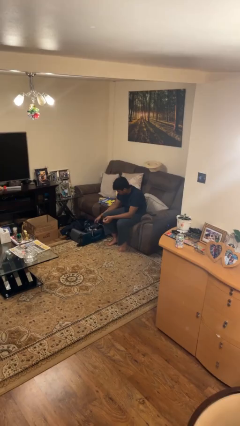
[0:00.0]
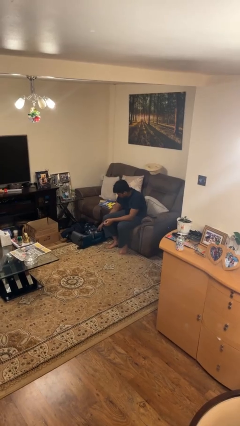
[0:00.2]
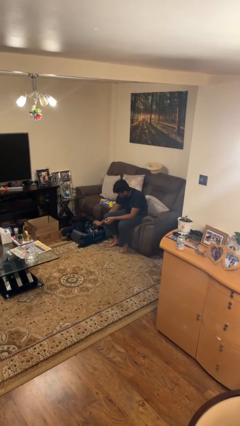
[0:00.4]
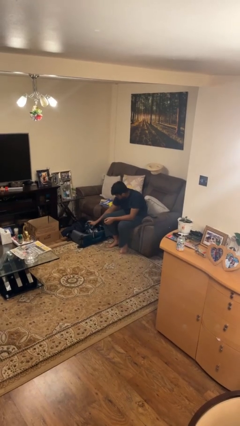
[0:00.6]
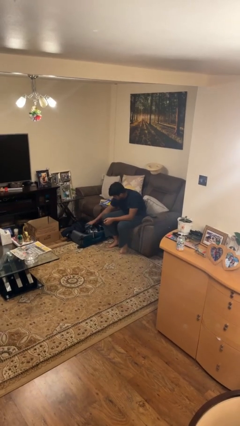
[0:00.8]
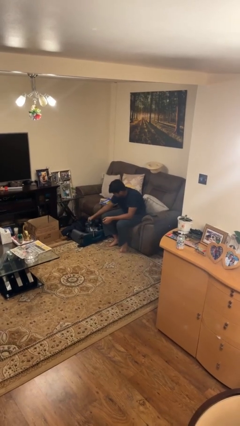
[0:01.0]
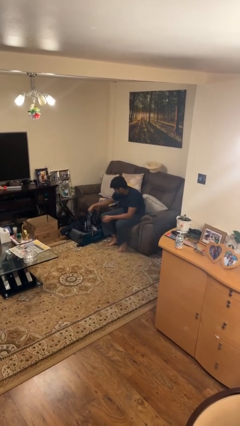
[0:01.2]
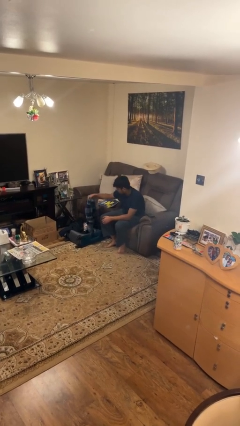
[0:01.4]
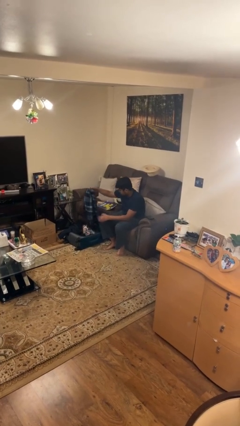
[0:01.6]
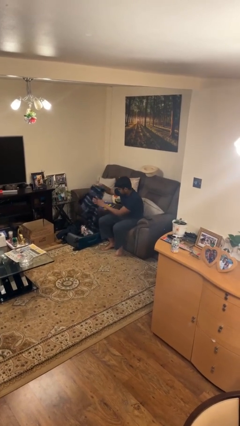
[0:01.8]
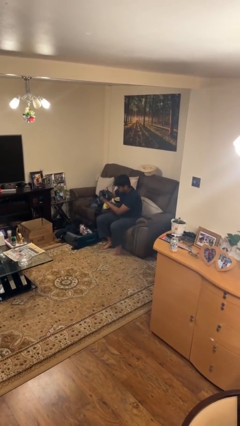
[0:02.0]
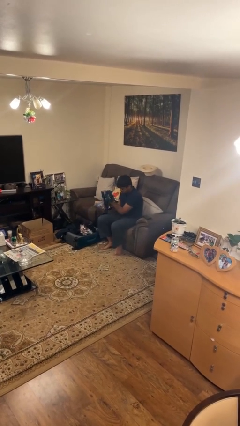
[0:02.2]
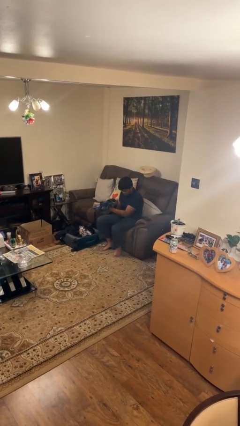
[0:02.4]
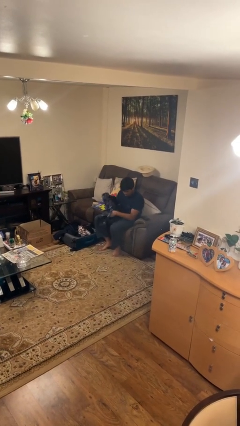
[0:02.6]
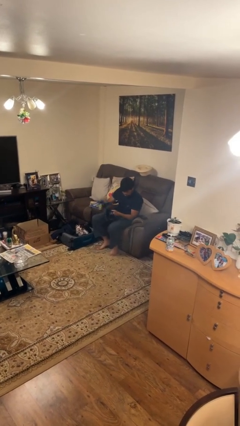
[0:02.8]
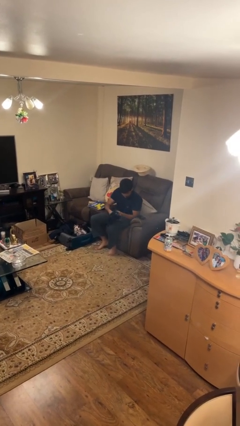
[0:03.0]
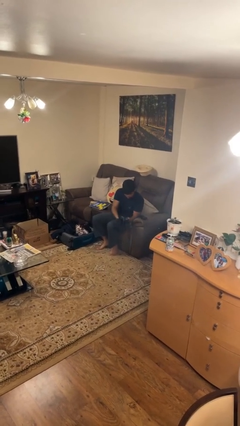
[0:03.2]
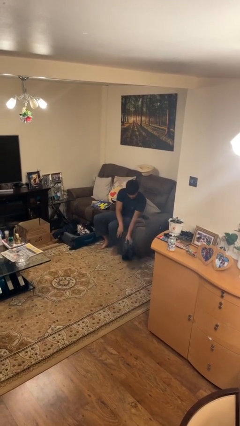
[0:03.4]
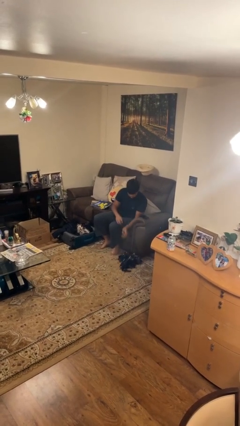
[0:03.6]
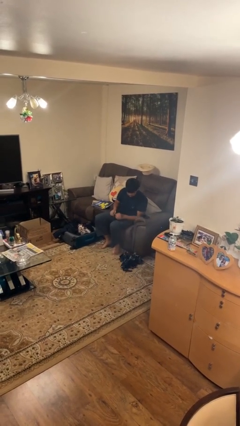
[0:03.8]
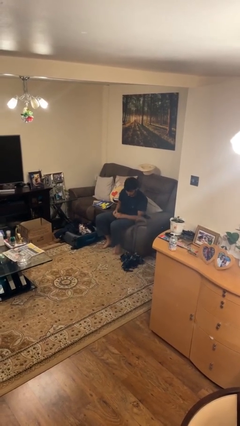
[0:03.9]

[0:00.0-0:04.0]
person unloads clothes from suitcase

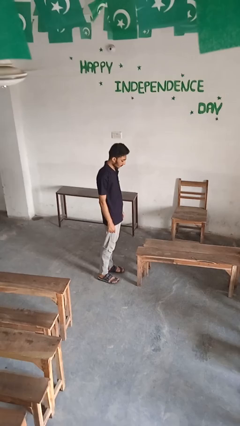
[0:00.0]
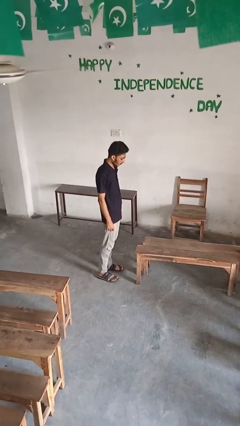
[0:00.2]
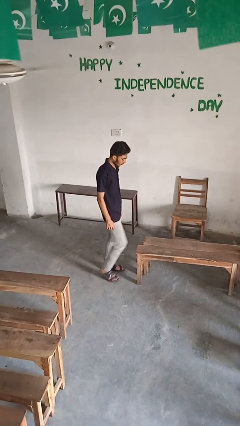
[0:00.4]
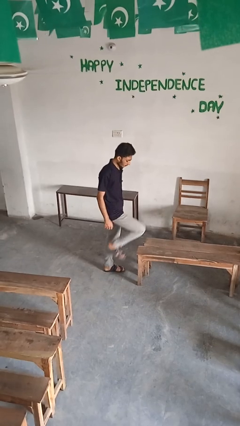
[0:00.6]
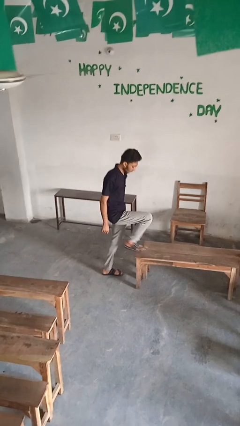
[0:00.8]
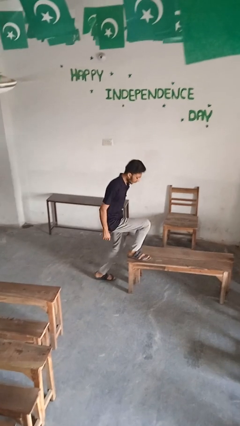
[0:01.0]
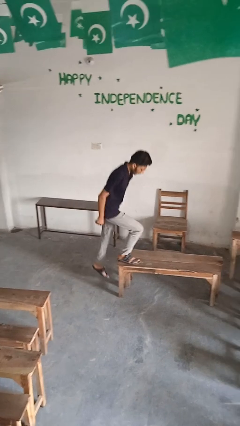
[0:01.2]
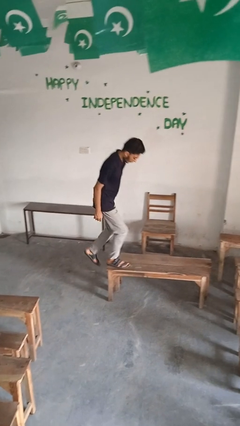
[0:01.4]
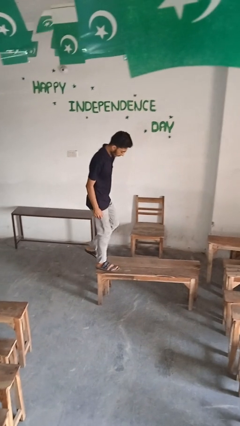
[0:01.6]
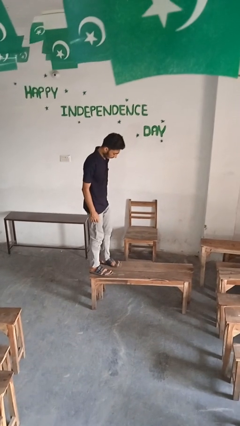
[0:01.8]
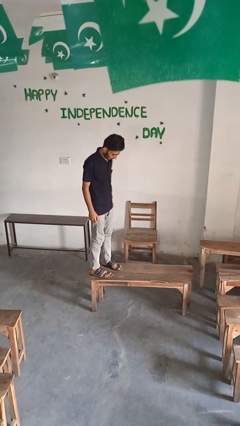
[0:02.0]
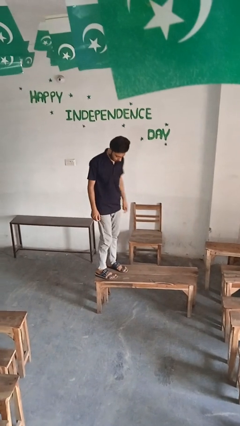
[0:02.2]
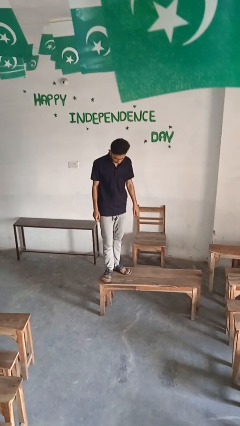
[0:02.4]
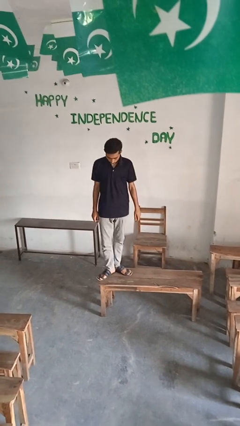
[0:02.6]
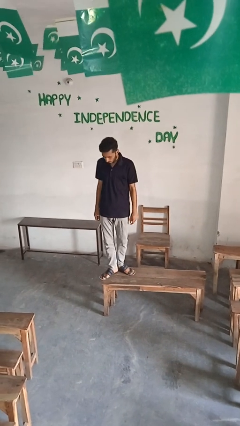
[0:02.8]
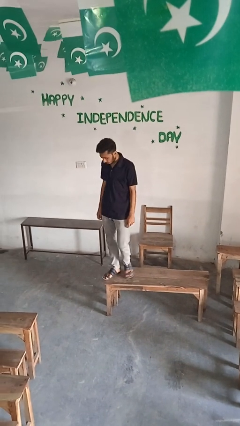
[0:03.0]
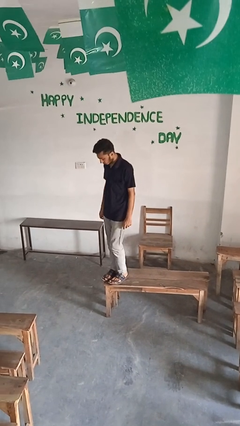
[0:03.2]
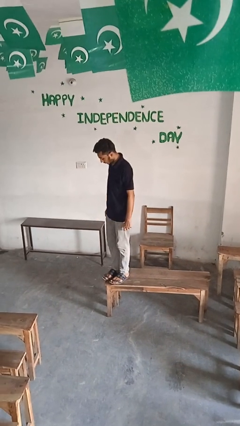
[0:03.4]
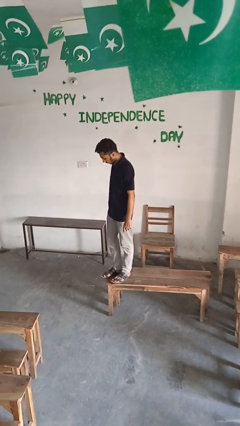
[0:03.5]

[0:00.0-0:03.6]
person climbs on table

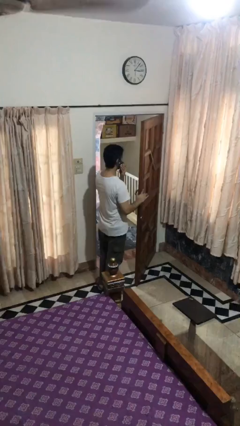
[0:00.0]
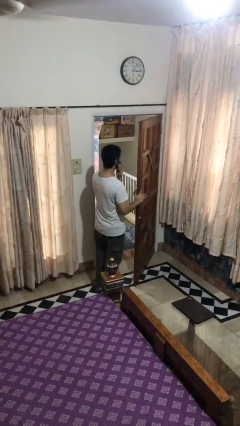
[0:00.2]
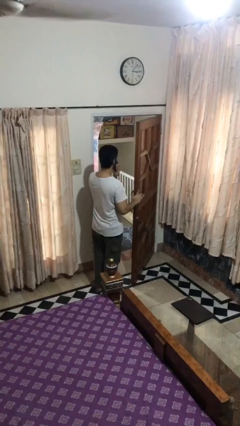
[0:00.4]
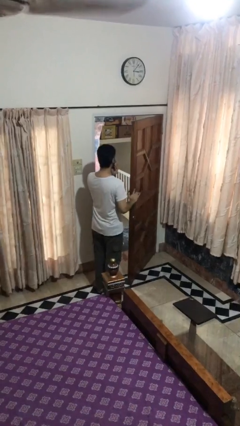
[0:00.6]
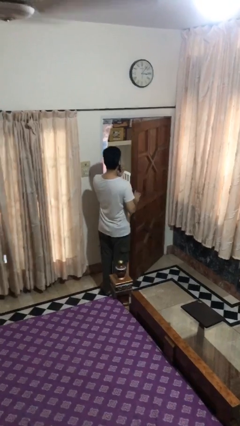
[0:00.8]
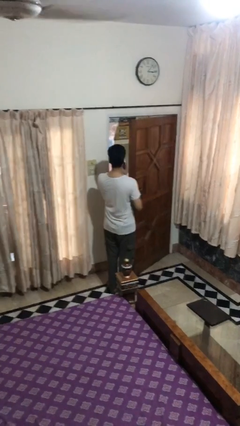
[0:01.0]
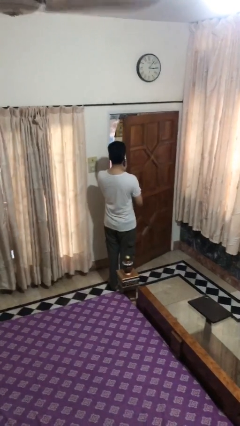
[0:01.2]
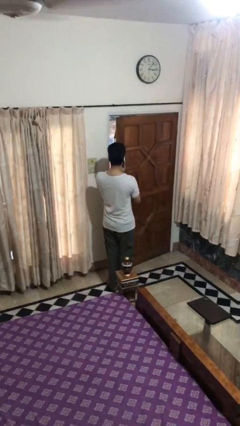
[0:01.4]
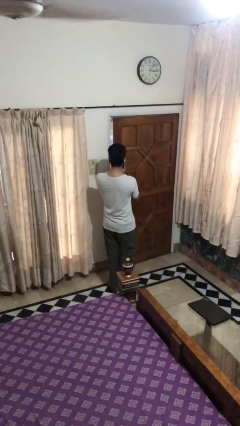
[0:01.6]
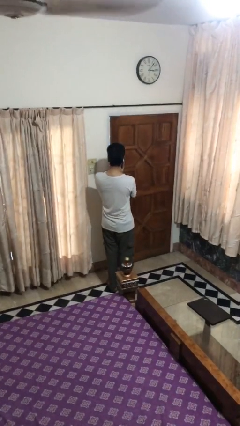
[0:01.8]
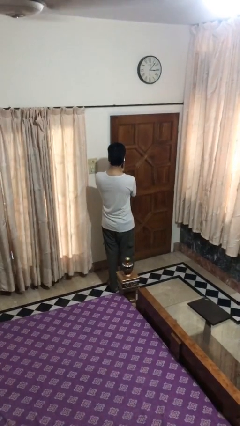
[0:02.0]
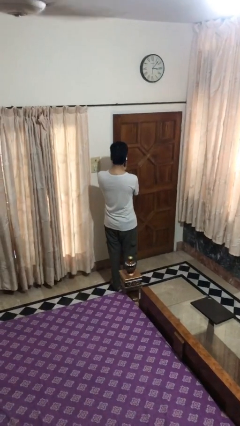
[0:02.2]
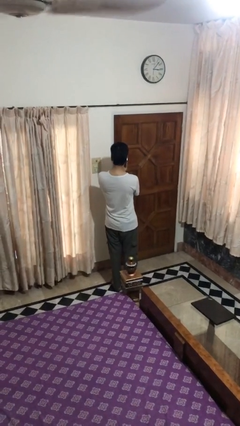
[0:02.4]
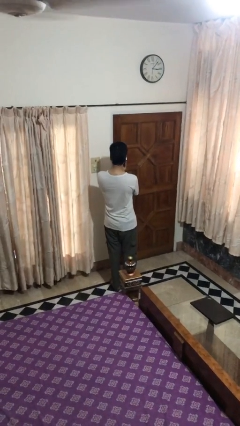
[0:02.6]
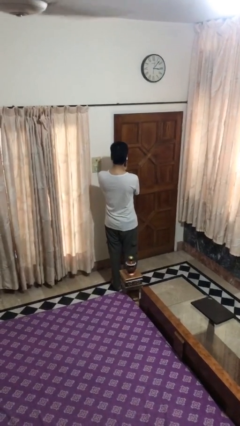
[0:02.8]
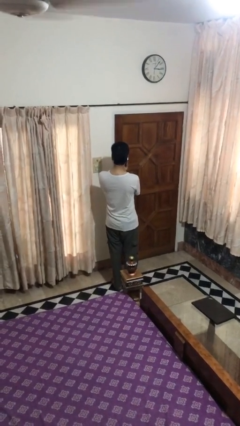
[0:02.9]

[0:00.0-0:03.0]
person closes facility door

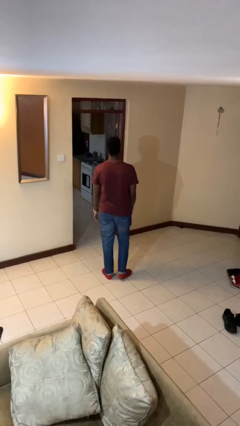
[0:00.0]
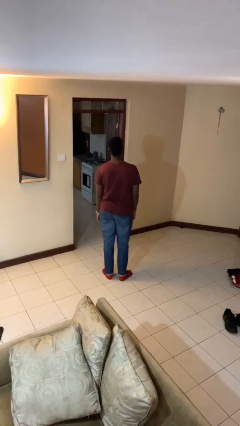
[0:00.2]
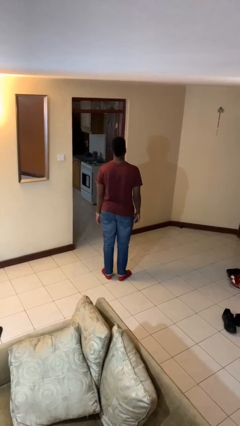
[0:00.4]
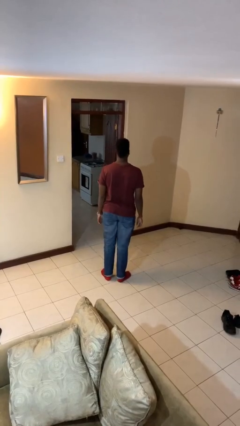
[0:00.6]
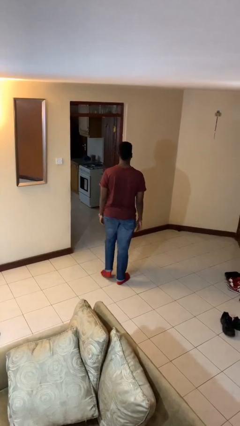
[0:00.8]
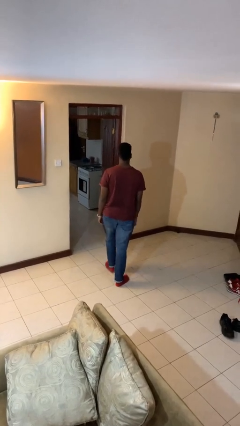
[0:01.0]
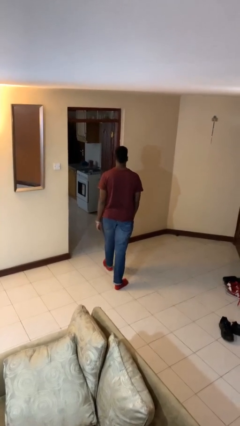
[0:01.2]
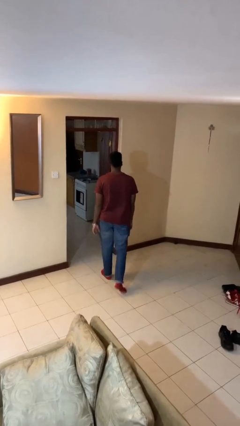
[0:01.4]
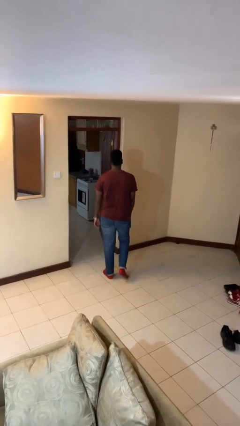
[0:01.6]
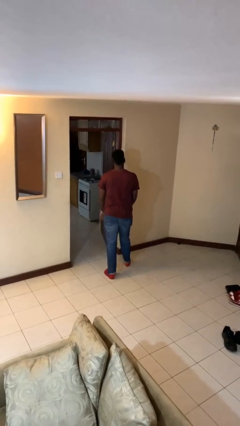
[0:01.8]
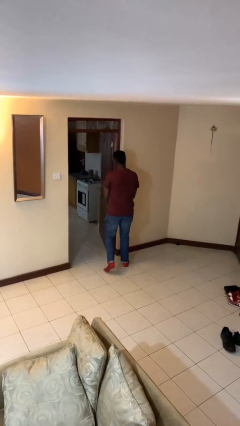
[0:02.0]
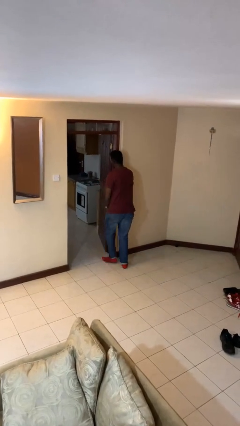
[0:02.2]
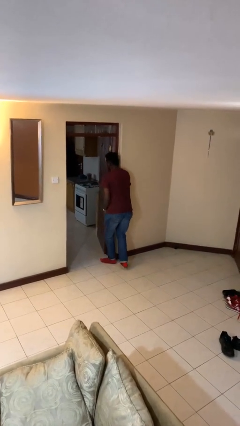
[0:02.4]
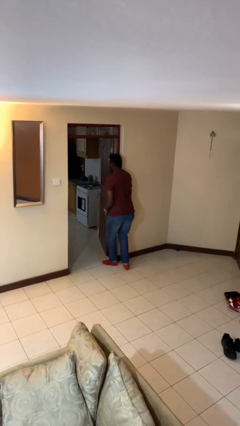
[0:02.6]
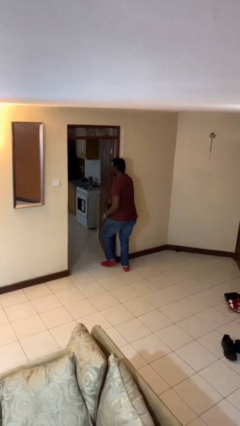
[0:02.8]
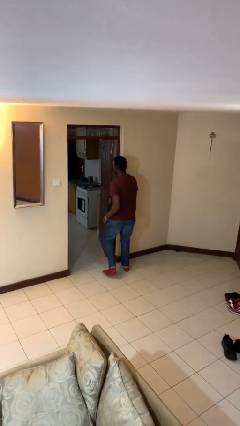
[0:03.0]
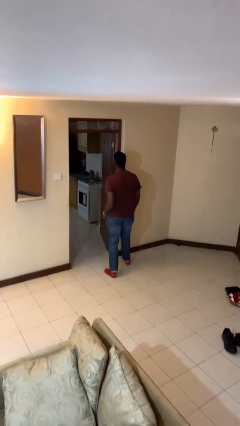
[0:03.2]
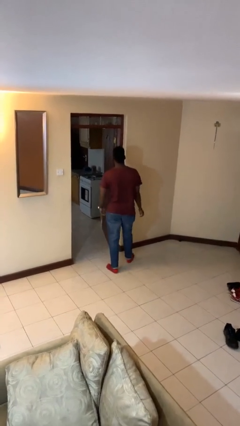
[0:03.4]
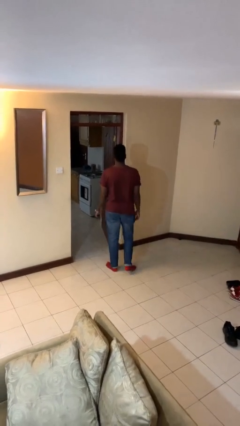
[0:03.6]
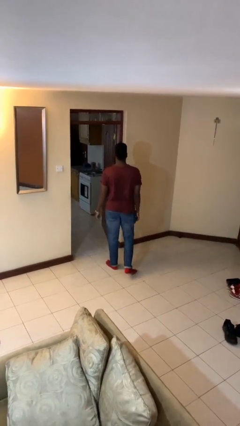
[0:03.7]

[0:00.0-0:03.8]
person bumps into wall

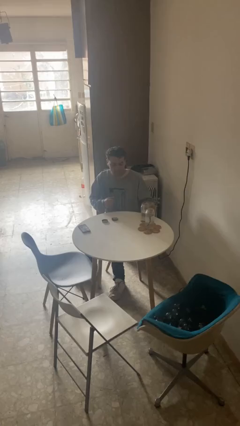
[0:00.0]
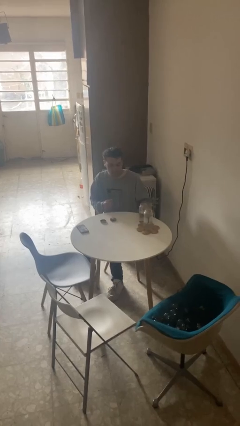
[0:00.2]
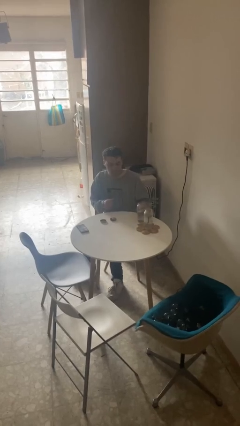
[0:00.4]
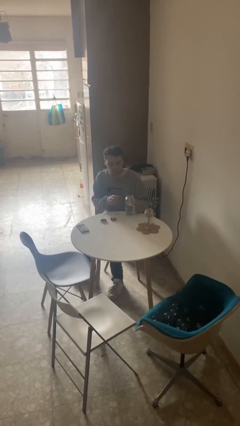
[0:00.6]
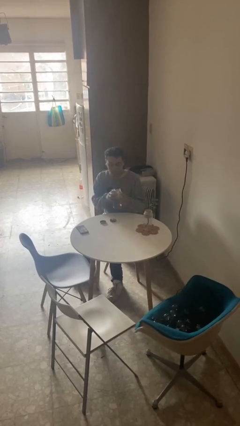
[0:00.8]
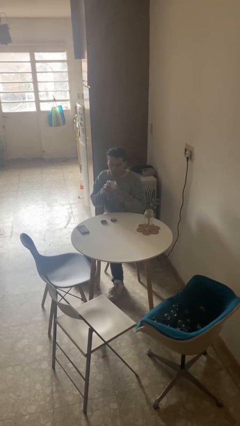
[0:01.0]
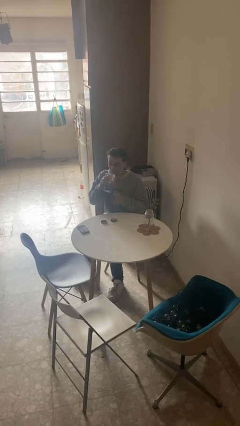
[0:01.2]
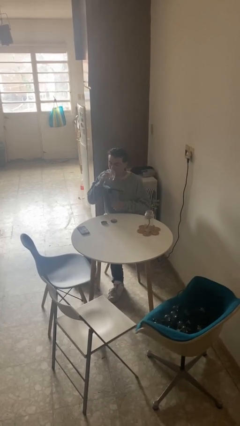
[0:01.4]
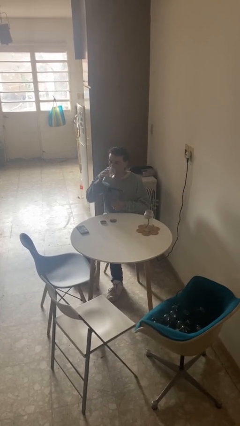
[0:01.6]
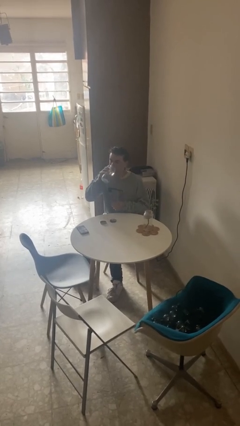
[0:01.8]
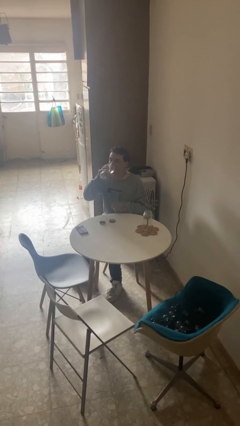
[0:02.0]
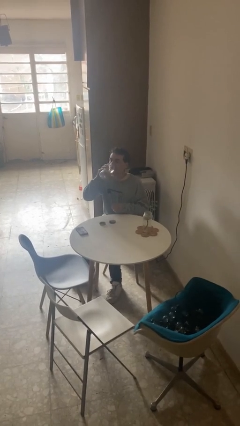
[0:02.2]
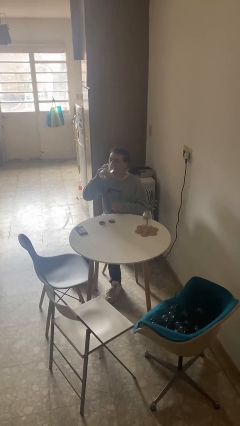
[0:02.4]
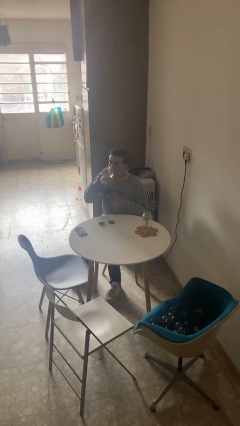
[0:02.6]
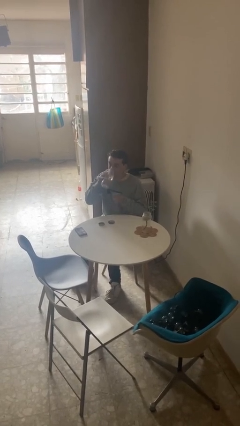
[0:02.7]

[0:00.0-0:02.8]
person drinks from cup

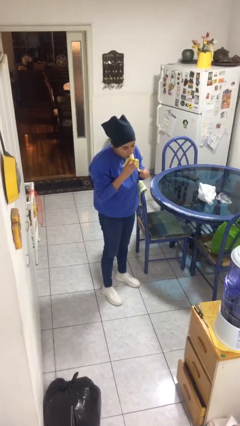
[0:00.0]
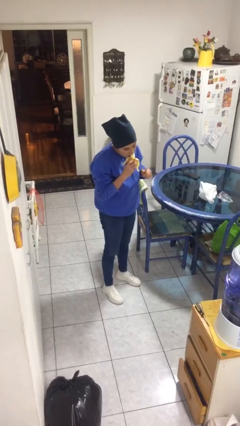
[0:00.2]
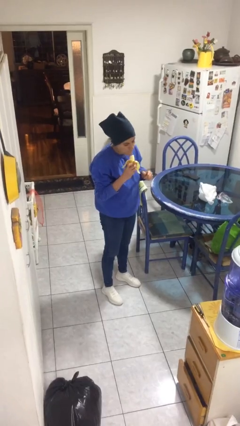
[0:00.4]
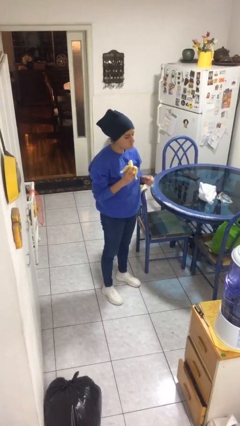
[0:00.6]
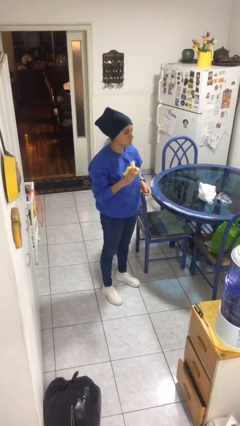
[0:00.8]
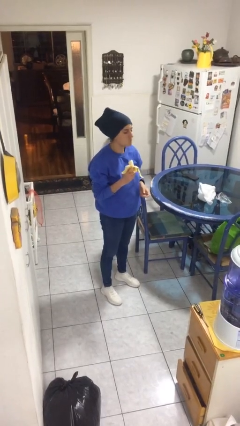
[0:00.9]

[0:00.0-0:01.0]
person eats banana
